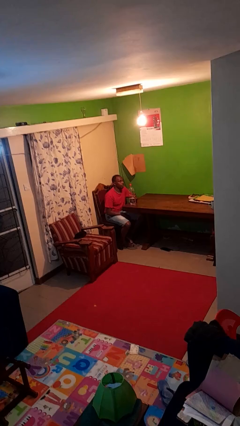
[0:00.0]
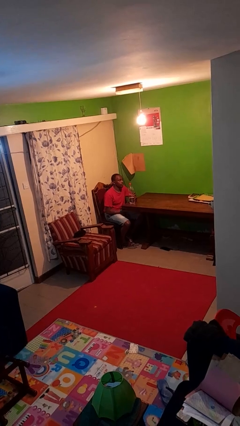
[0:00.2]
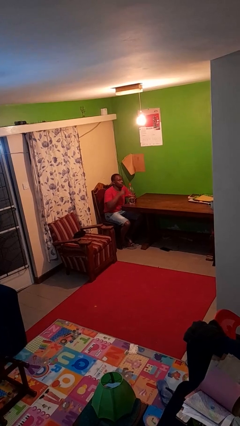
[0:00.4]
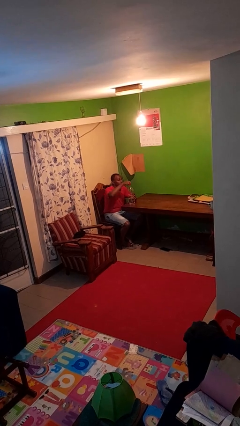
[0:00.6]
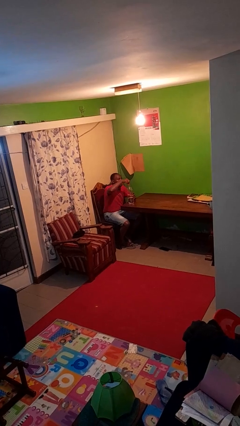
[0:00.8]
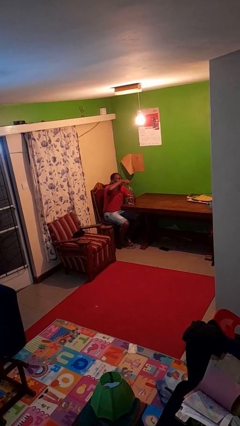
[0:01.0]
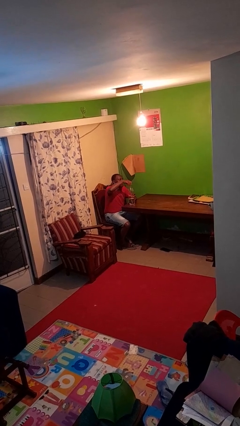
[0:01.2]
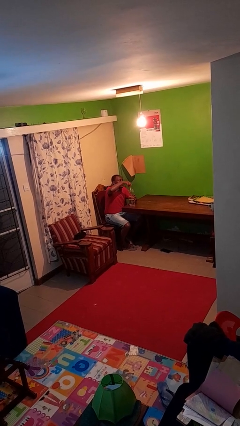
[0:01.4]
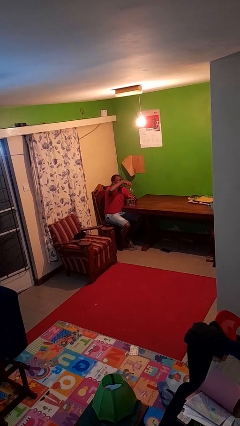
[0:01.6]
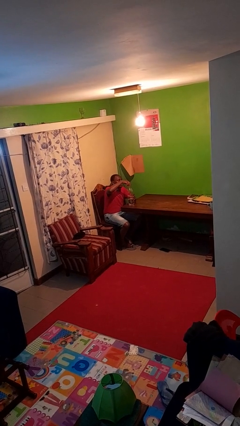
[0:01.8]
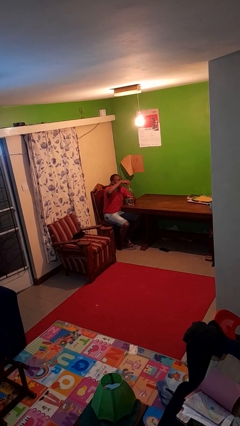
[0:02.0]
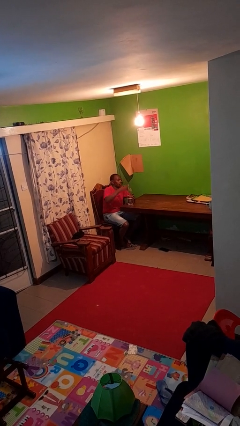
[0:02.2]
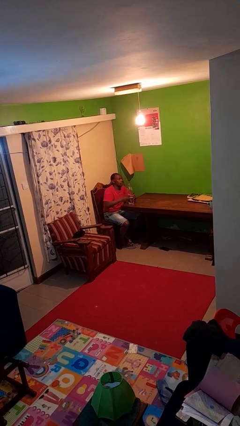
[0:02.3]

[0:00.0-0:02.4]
person unscrews lid from bottle

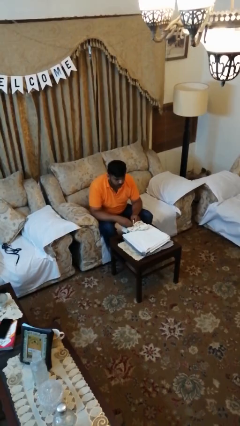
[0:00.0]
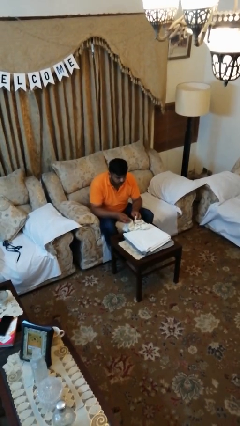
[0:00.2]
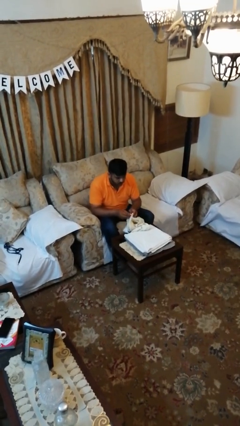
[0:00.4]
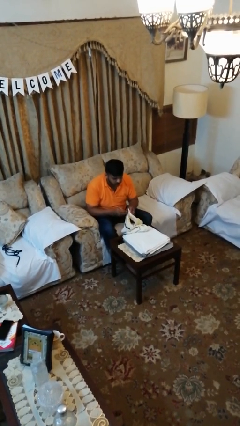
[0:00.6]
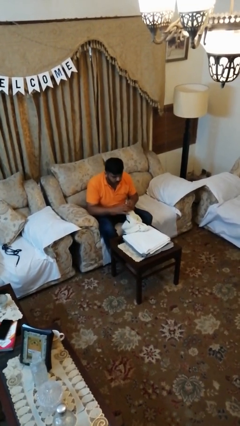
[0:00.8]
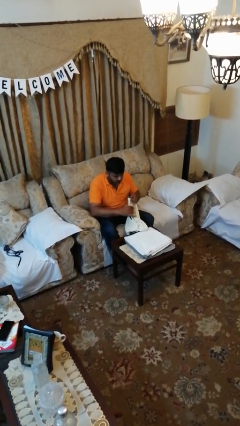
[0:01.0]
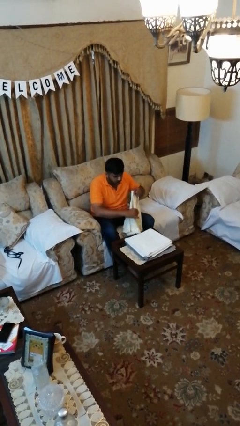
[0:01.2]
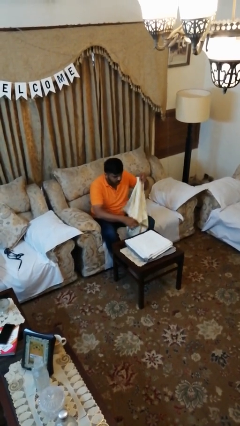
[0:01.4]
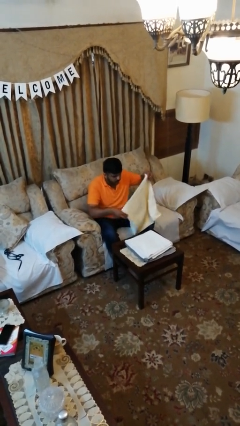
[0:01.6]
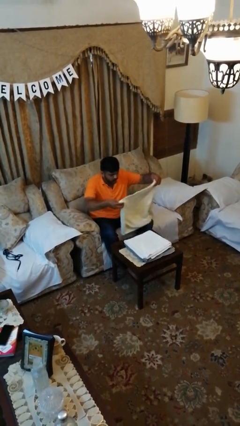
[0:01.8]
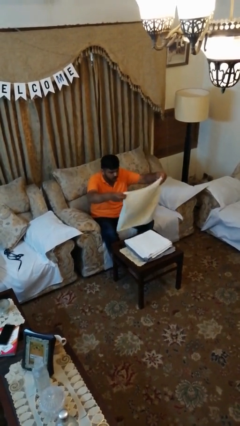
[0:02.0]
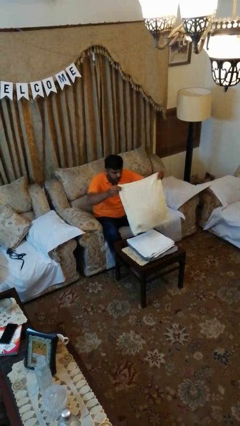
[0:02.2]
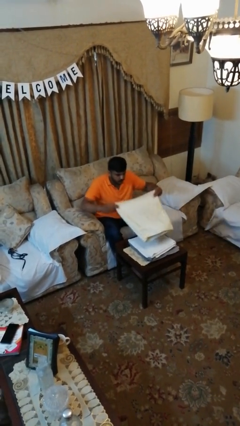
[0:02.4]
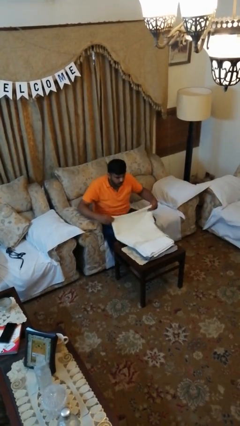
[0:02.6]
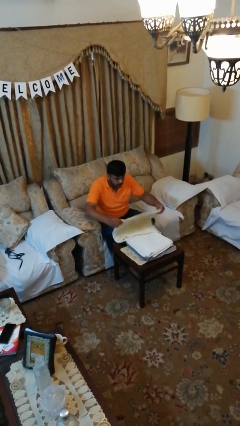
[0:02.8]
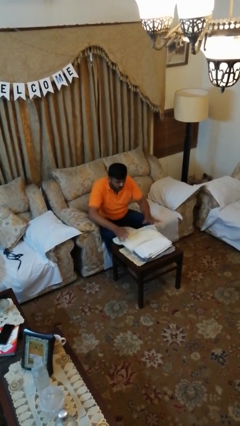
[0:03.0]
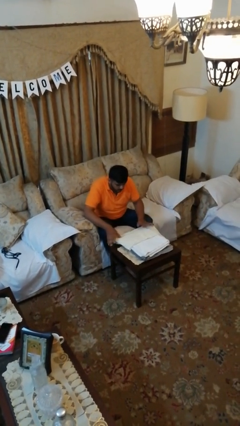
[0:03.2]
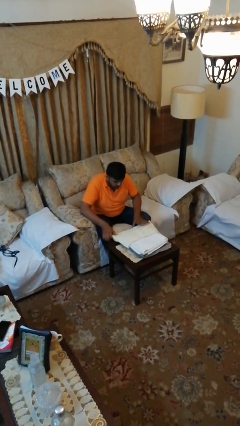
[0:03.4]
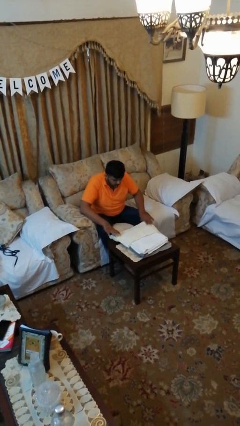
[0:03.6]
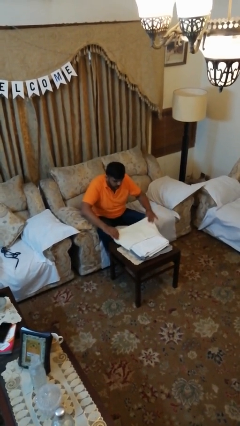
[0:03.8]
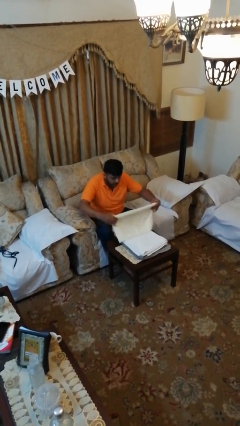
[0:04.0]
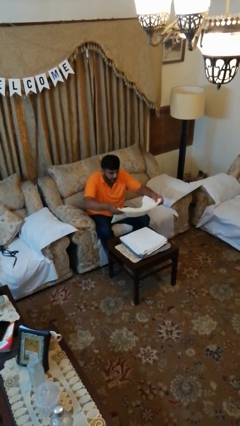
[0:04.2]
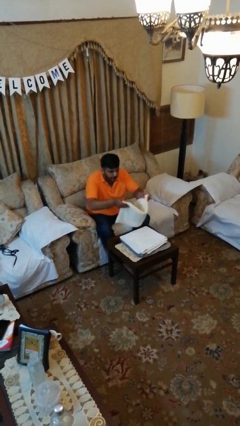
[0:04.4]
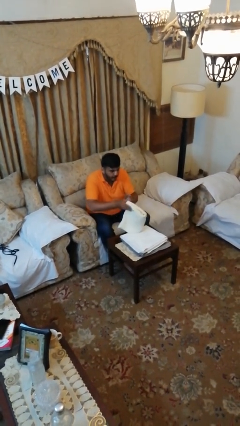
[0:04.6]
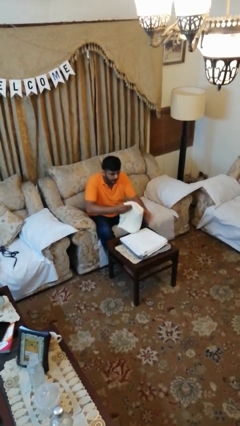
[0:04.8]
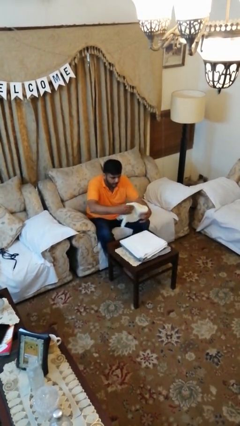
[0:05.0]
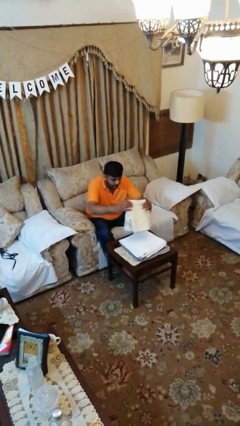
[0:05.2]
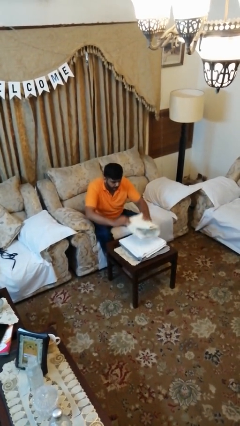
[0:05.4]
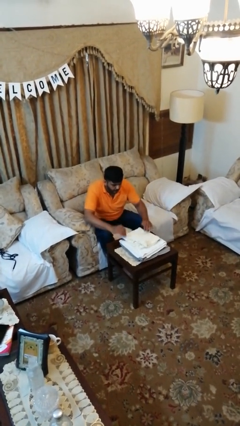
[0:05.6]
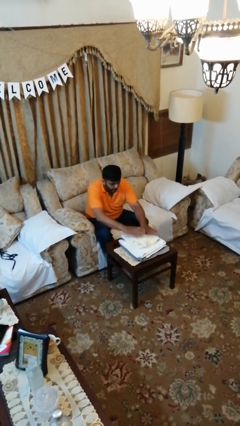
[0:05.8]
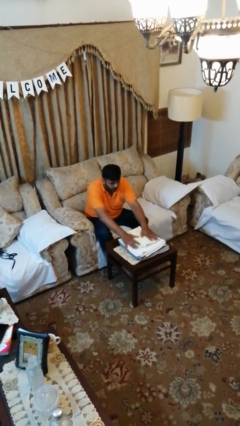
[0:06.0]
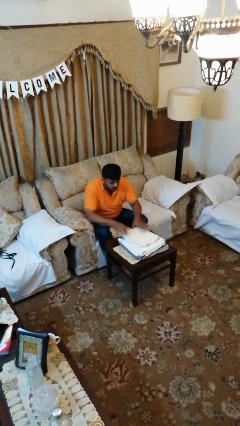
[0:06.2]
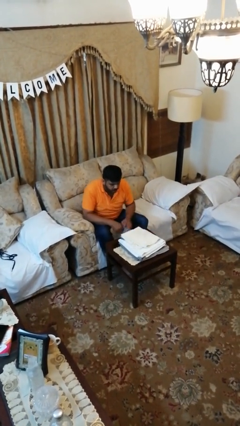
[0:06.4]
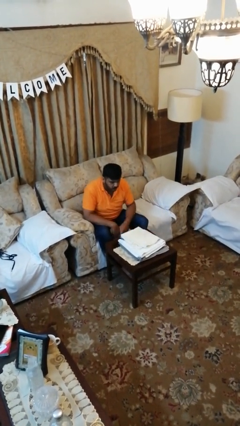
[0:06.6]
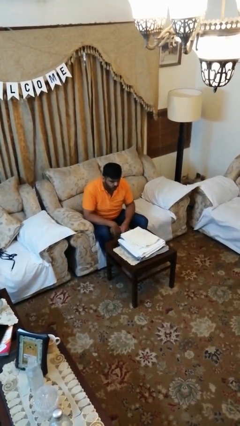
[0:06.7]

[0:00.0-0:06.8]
person folds towel

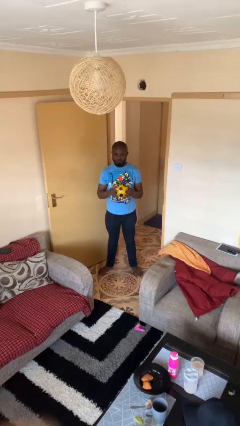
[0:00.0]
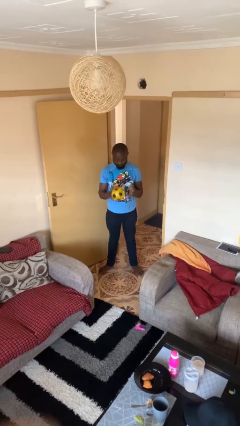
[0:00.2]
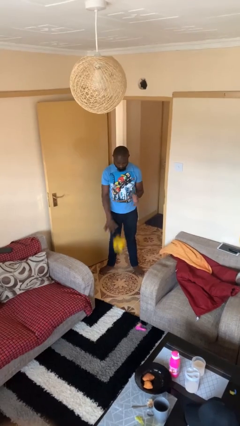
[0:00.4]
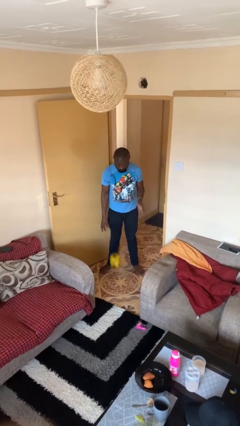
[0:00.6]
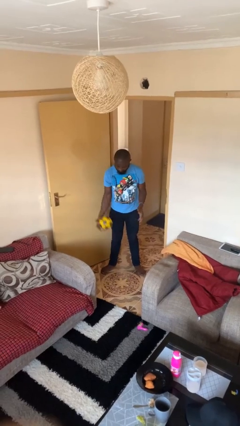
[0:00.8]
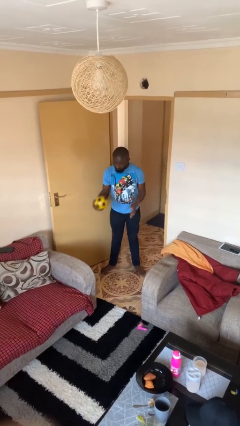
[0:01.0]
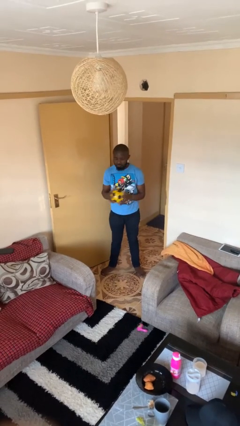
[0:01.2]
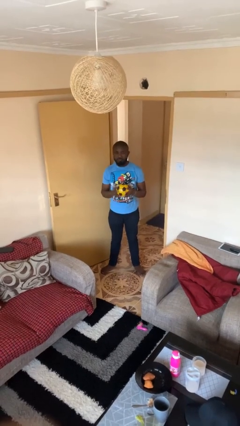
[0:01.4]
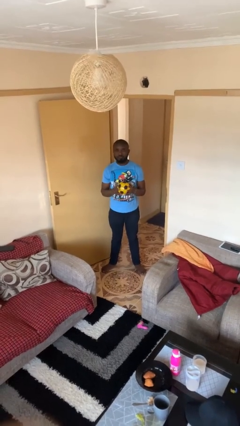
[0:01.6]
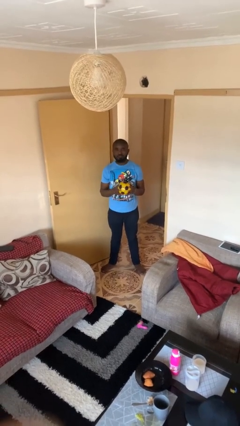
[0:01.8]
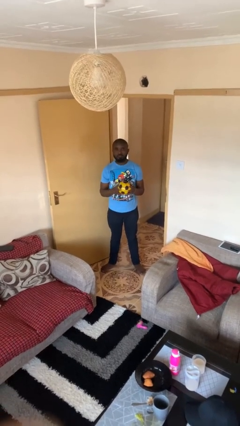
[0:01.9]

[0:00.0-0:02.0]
person bounces ball on floor

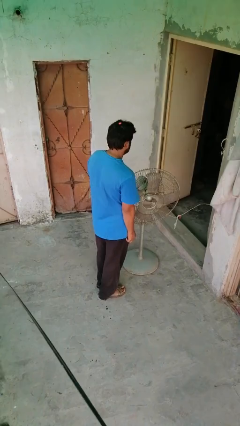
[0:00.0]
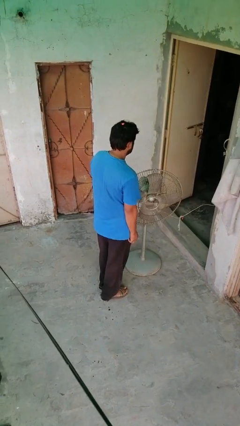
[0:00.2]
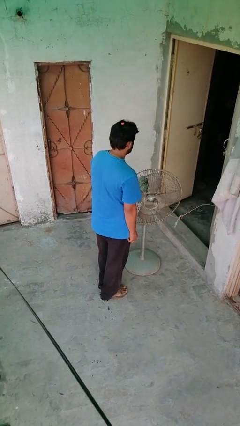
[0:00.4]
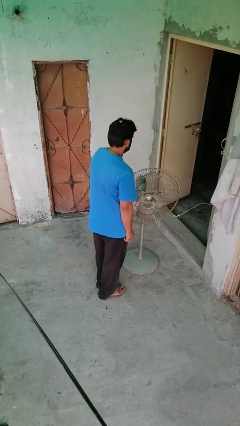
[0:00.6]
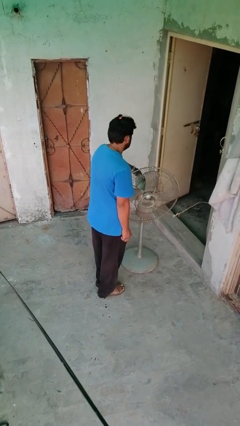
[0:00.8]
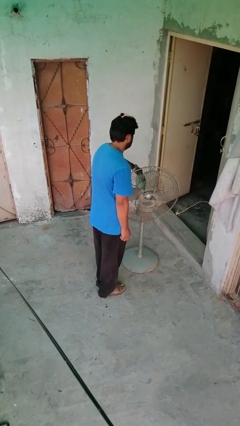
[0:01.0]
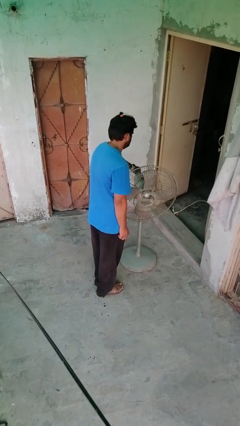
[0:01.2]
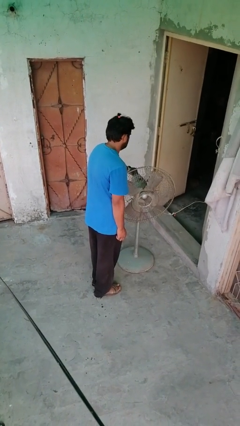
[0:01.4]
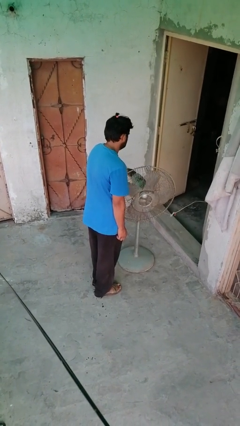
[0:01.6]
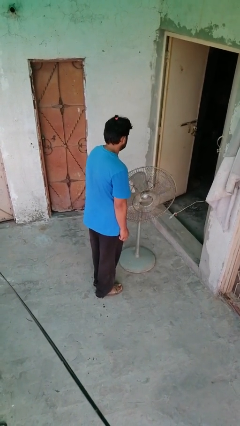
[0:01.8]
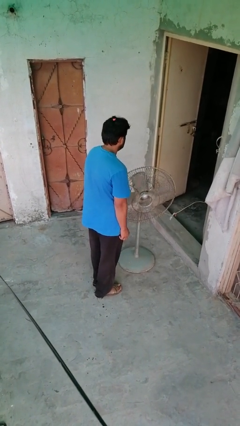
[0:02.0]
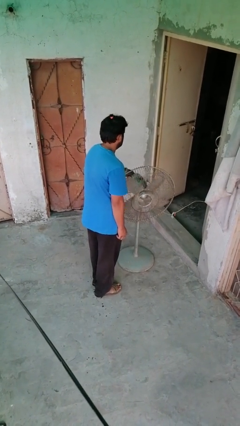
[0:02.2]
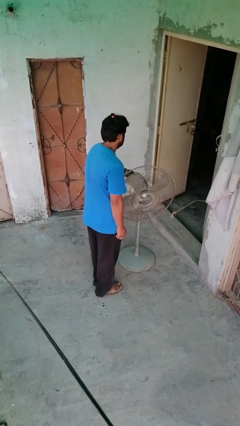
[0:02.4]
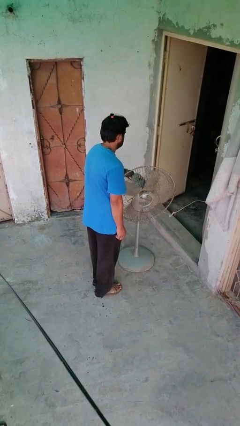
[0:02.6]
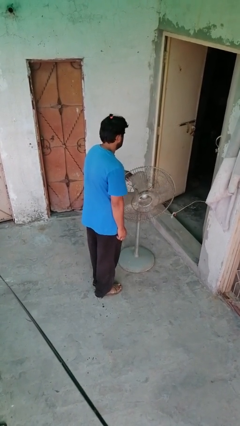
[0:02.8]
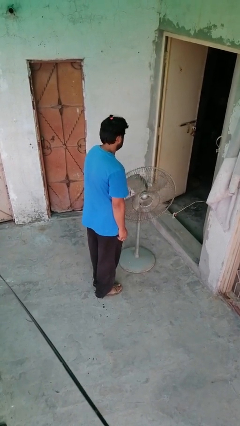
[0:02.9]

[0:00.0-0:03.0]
person turns on fan

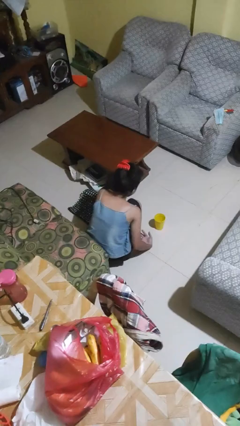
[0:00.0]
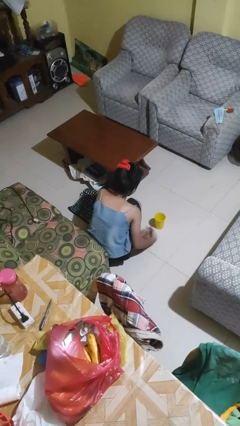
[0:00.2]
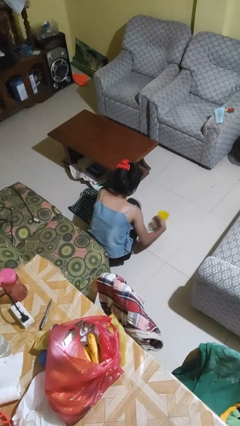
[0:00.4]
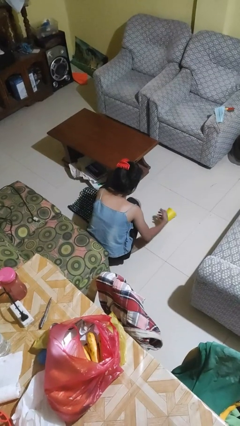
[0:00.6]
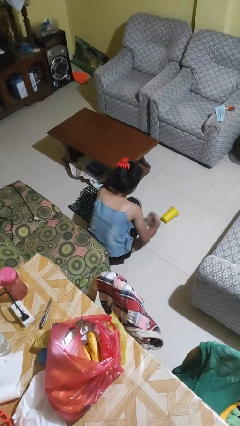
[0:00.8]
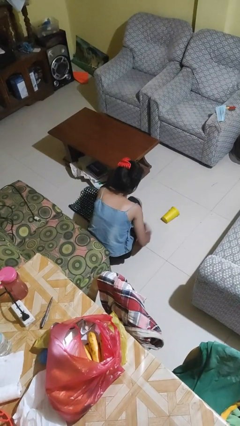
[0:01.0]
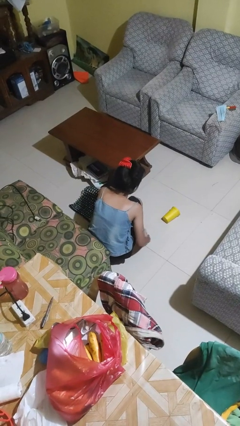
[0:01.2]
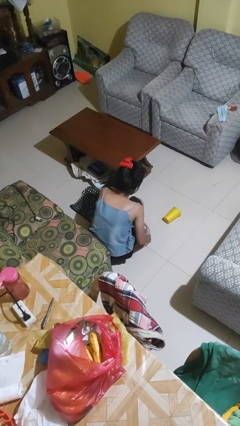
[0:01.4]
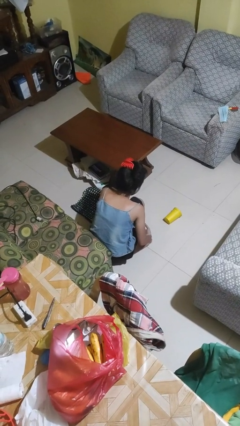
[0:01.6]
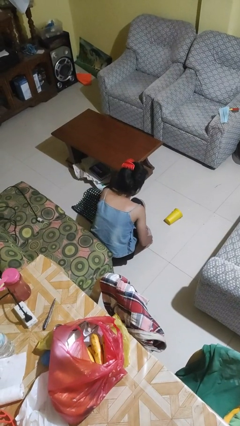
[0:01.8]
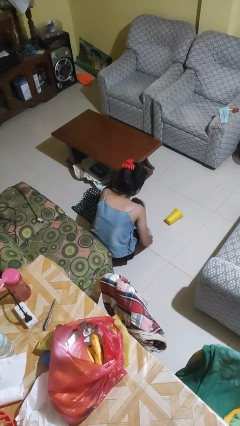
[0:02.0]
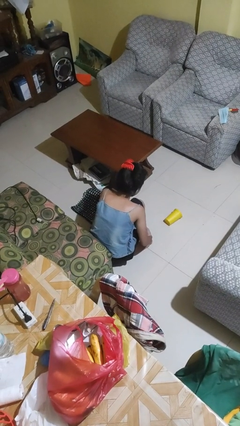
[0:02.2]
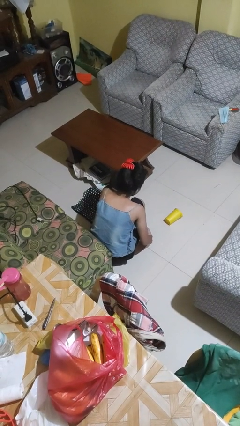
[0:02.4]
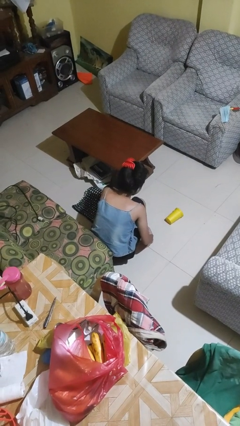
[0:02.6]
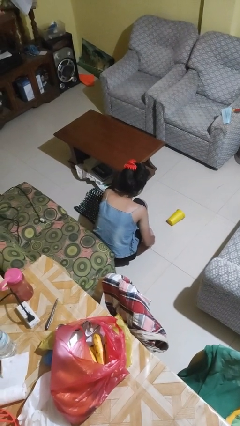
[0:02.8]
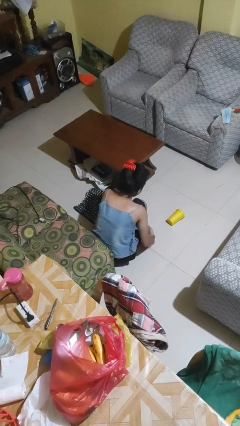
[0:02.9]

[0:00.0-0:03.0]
person spills on floor

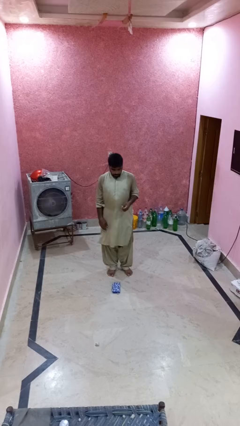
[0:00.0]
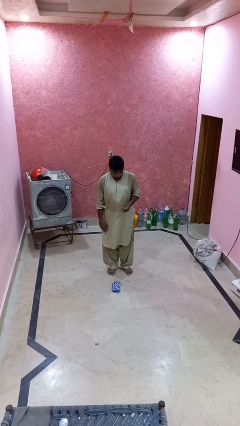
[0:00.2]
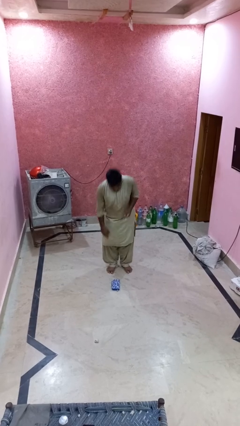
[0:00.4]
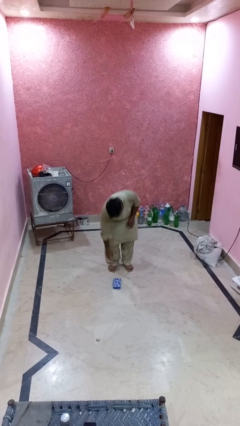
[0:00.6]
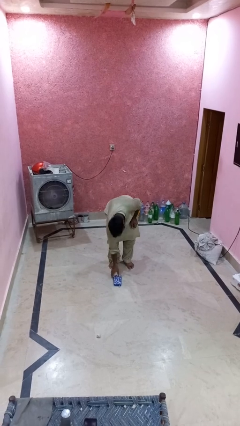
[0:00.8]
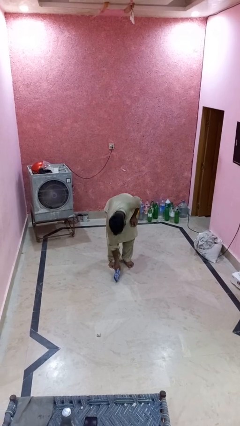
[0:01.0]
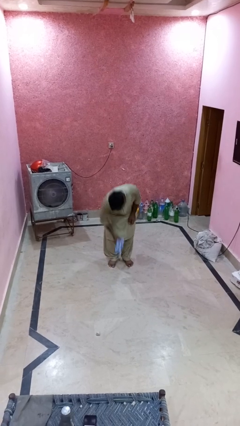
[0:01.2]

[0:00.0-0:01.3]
person picks up object from floor
